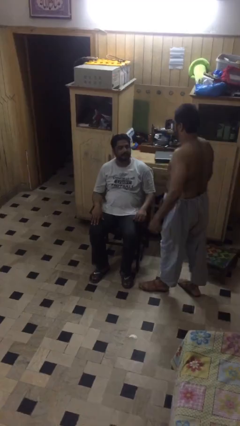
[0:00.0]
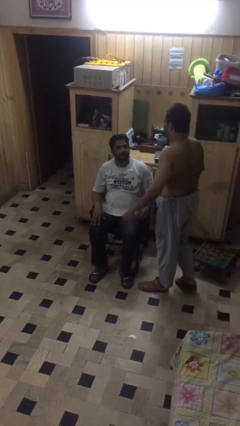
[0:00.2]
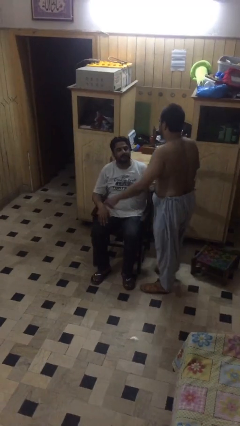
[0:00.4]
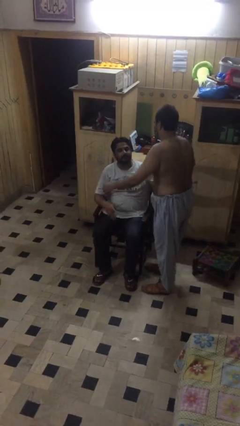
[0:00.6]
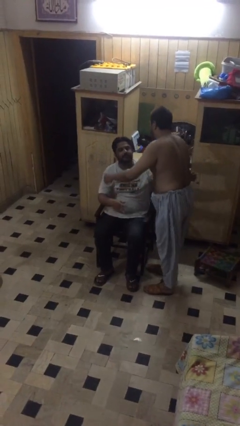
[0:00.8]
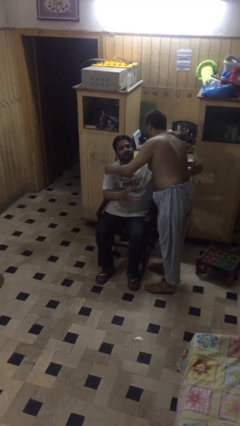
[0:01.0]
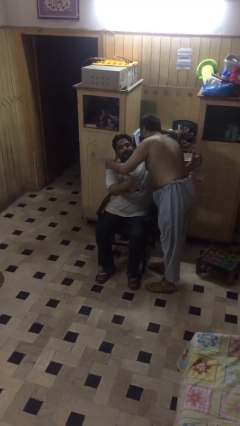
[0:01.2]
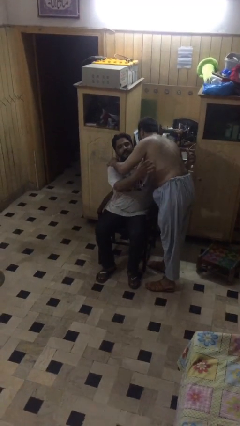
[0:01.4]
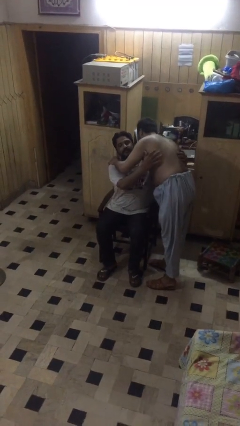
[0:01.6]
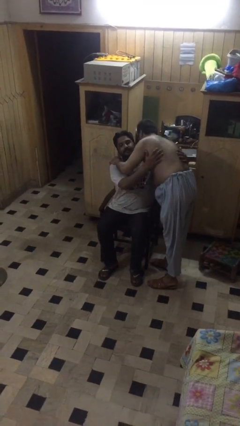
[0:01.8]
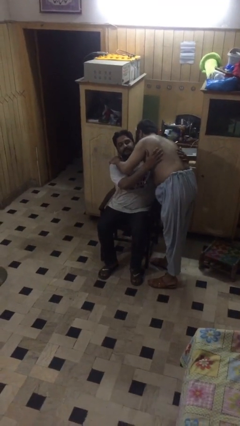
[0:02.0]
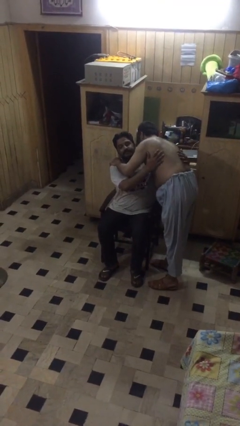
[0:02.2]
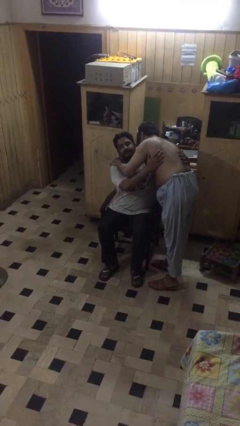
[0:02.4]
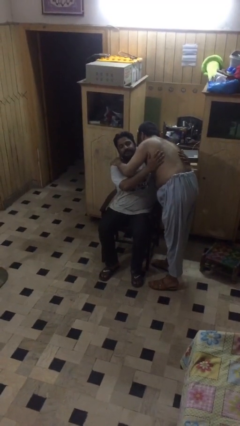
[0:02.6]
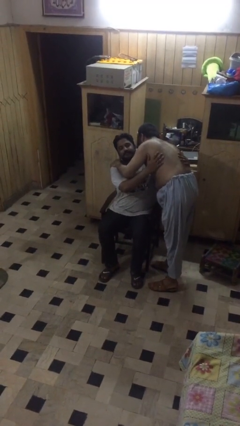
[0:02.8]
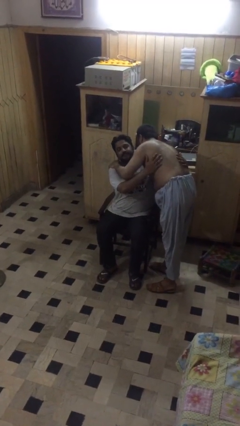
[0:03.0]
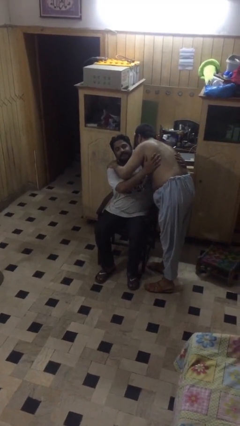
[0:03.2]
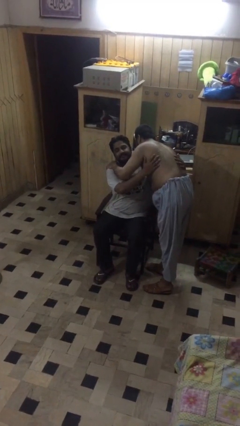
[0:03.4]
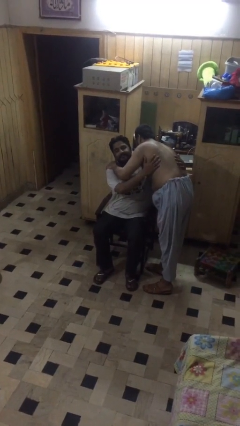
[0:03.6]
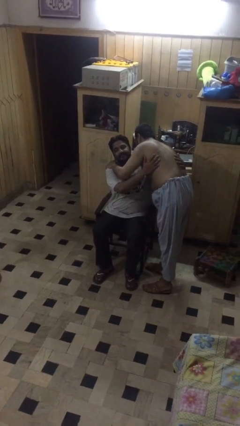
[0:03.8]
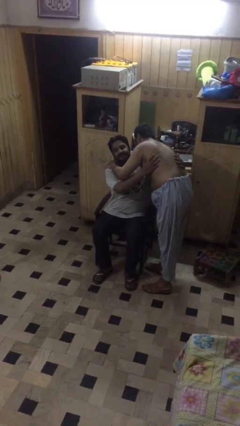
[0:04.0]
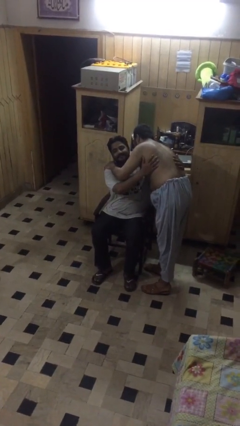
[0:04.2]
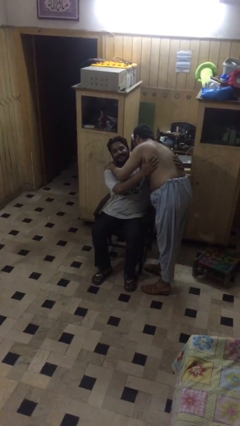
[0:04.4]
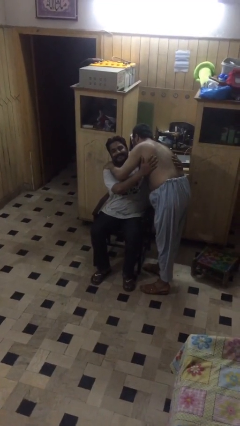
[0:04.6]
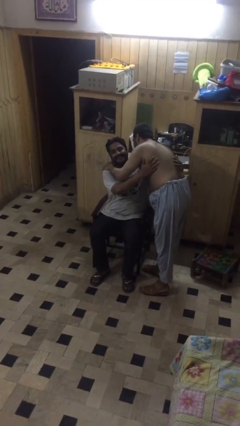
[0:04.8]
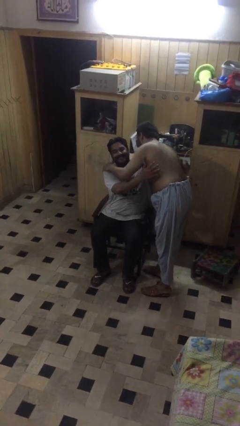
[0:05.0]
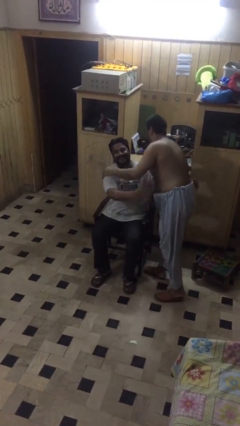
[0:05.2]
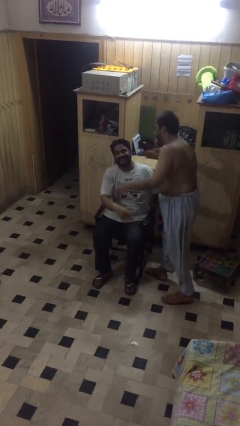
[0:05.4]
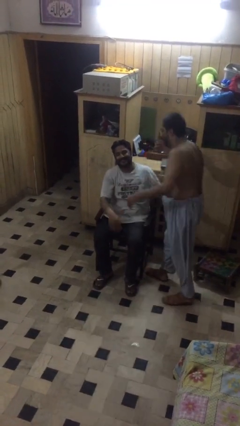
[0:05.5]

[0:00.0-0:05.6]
person embraces person

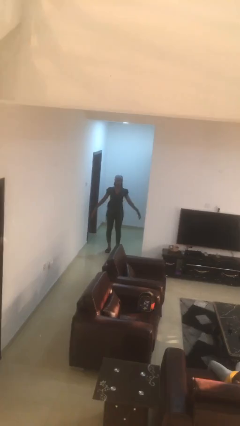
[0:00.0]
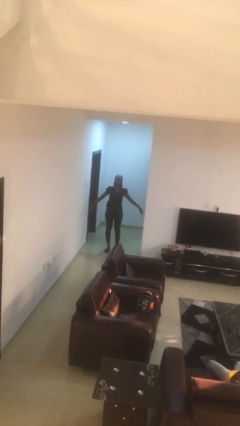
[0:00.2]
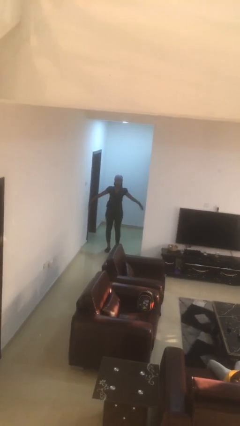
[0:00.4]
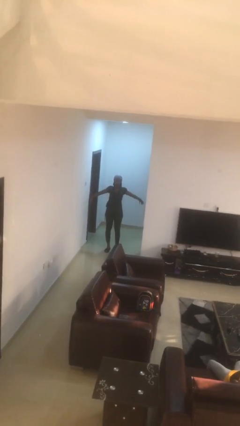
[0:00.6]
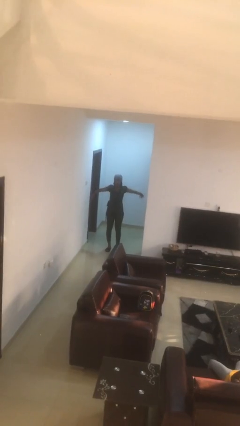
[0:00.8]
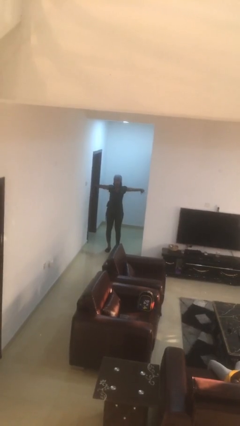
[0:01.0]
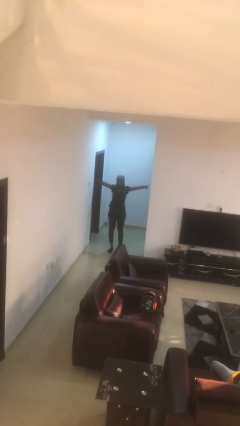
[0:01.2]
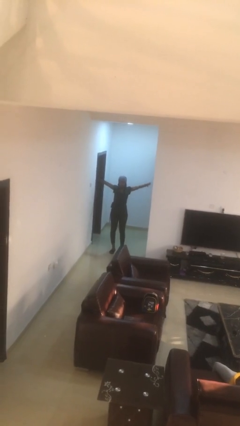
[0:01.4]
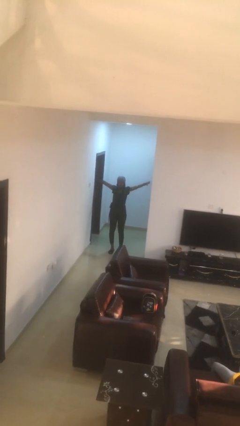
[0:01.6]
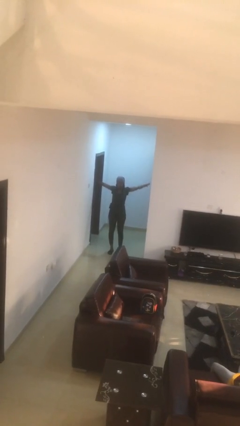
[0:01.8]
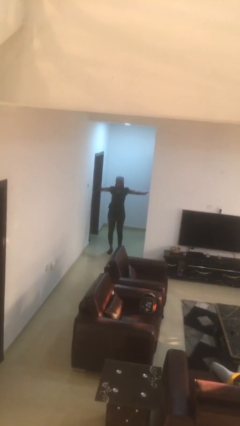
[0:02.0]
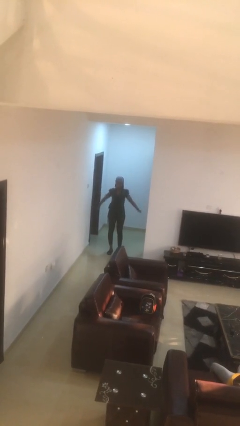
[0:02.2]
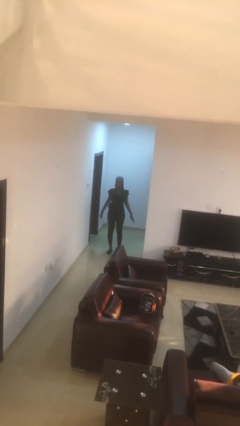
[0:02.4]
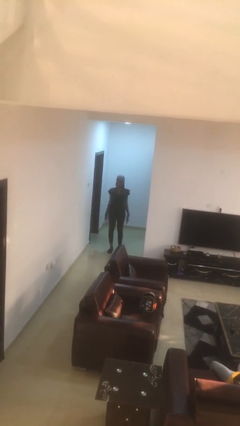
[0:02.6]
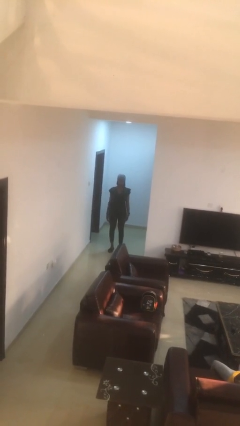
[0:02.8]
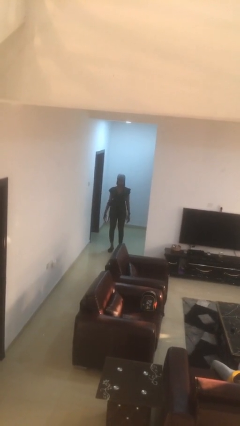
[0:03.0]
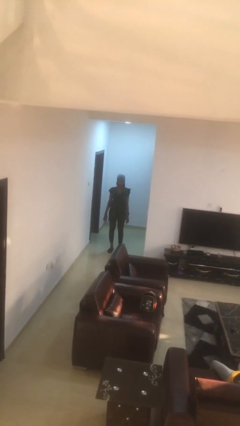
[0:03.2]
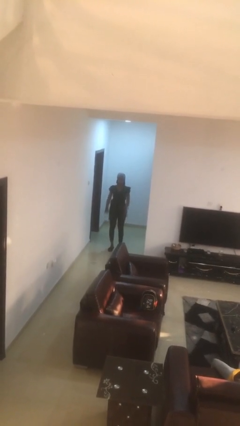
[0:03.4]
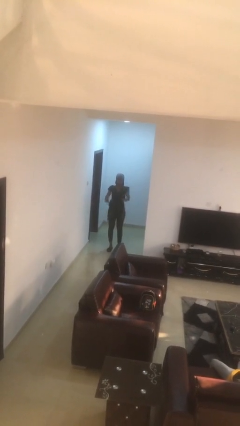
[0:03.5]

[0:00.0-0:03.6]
person stretches arms to side

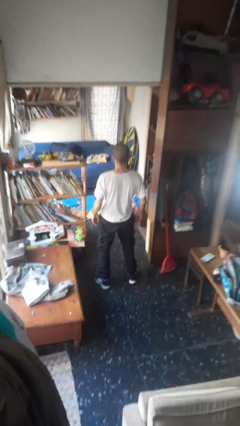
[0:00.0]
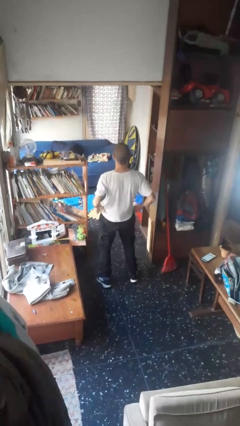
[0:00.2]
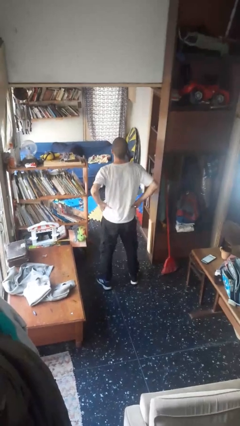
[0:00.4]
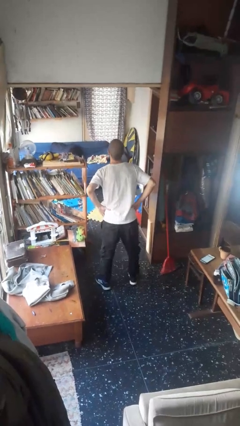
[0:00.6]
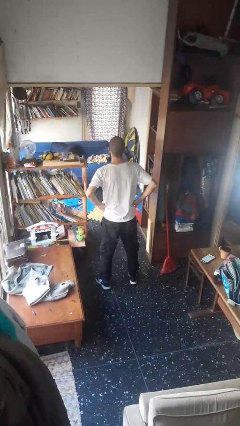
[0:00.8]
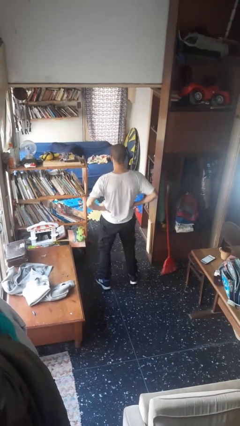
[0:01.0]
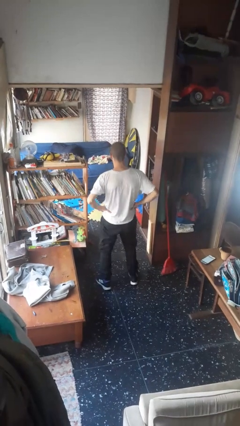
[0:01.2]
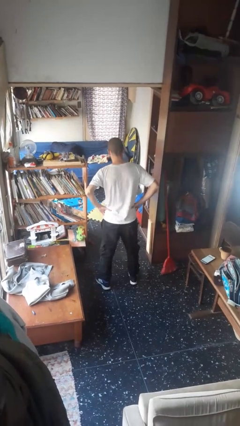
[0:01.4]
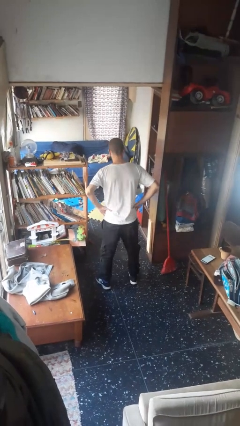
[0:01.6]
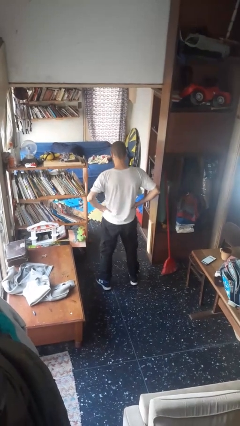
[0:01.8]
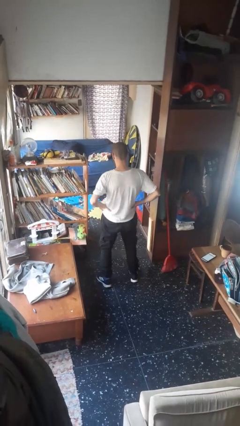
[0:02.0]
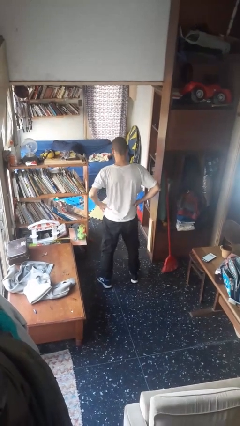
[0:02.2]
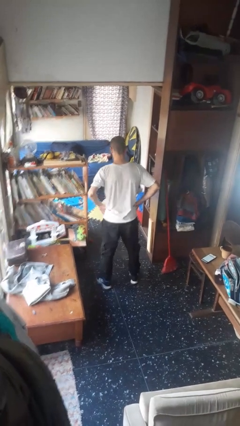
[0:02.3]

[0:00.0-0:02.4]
person wiggles hips

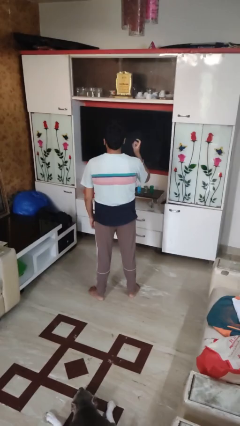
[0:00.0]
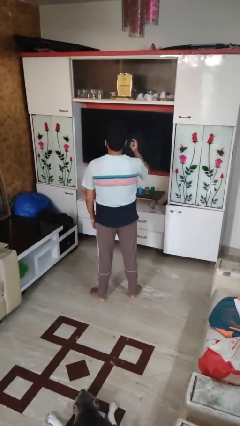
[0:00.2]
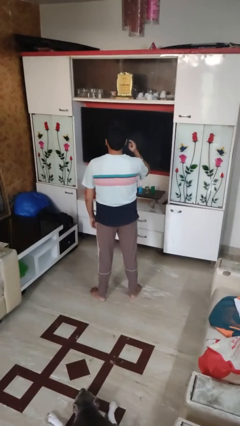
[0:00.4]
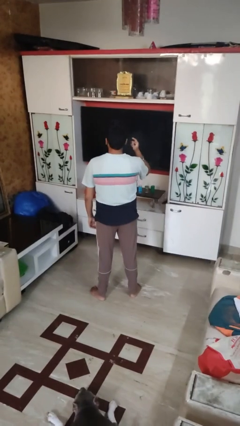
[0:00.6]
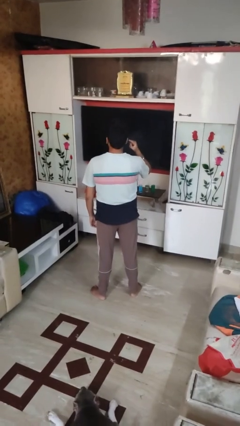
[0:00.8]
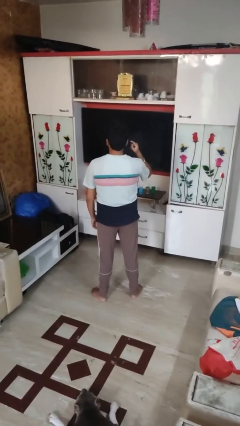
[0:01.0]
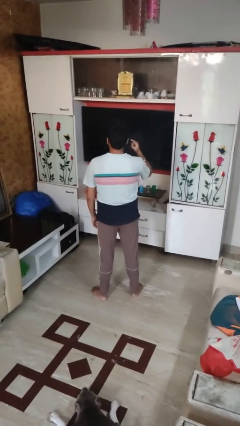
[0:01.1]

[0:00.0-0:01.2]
person gestures listen closely

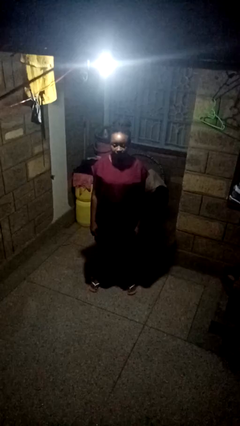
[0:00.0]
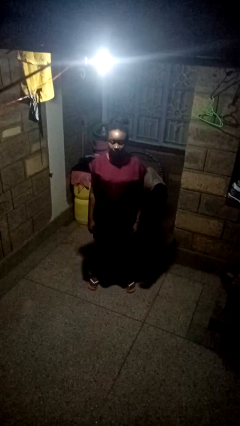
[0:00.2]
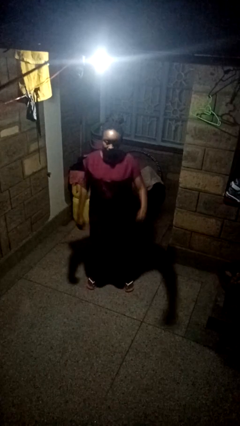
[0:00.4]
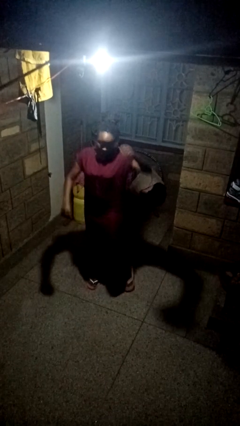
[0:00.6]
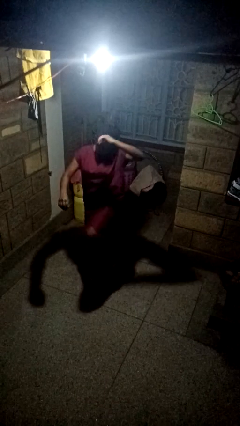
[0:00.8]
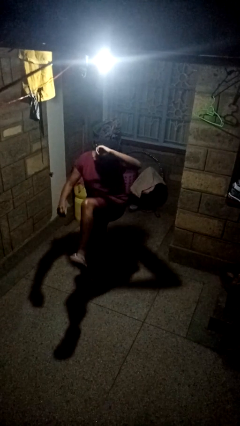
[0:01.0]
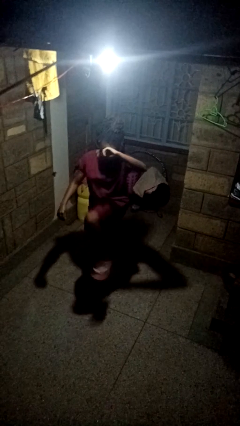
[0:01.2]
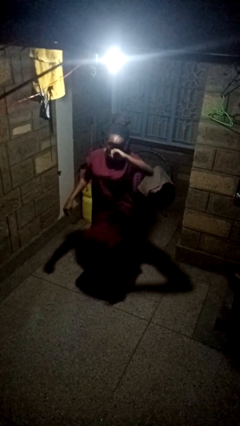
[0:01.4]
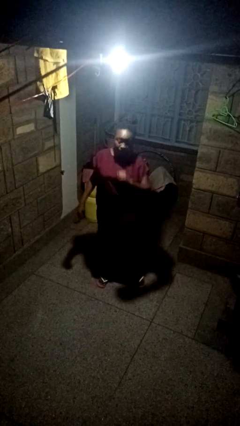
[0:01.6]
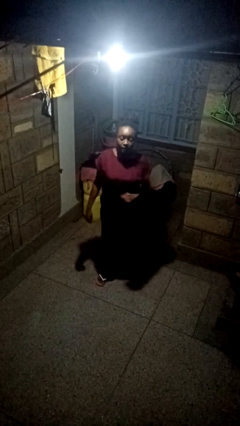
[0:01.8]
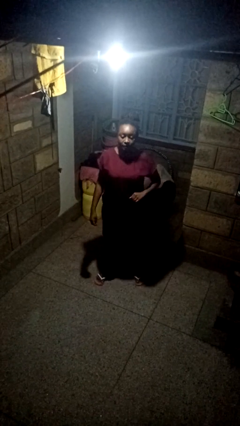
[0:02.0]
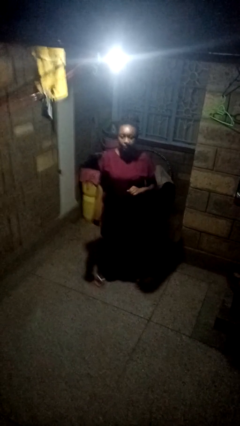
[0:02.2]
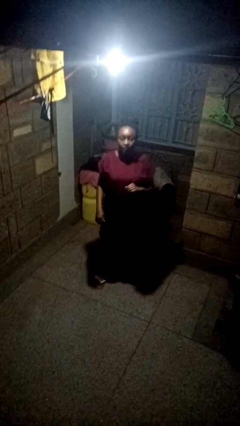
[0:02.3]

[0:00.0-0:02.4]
person karate kicks

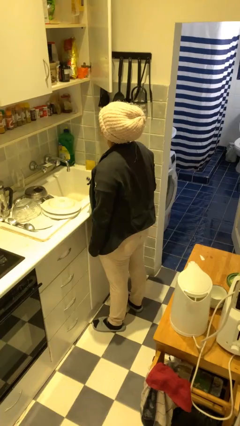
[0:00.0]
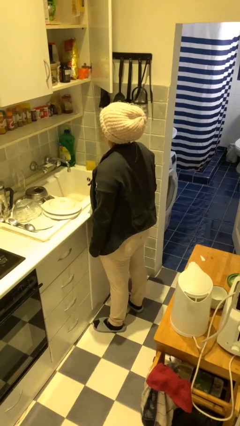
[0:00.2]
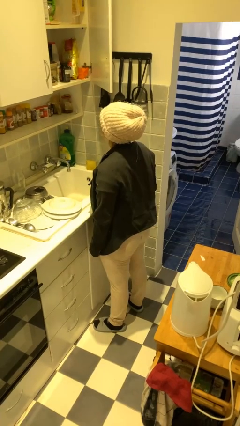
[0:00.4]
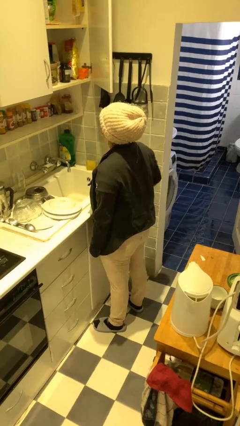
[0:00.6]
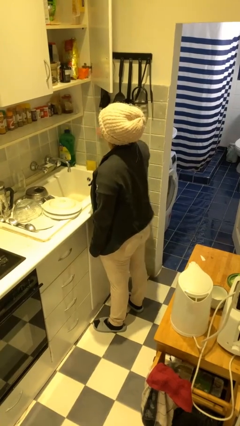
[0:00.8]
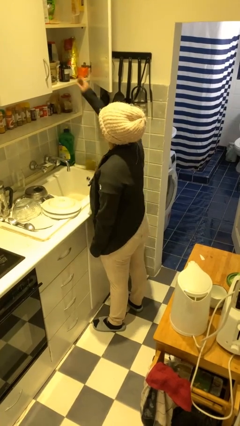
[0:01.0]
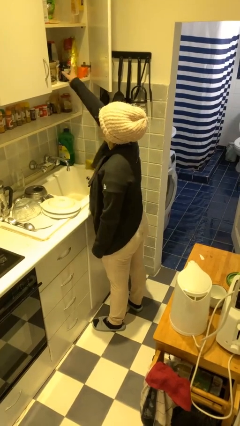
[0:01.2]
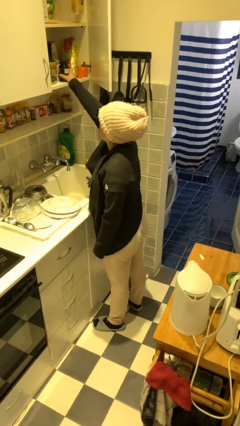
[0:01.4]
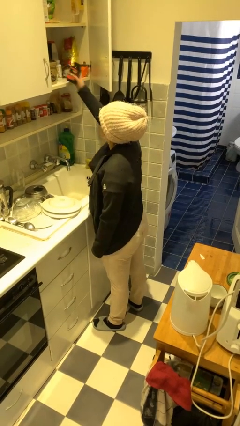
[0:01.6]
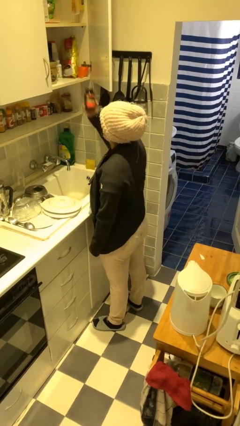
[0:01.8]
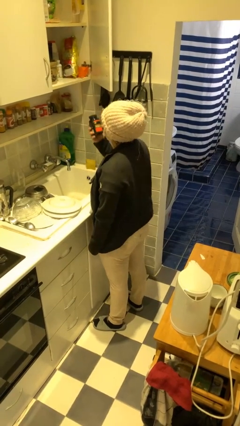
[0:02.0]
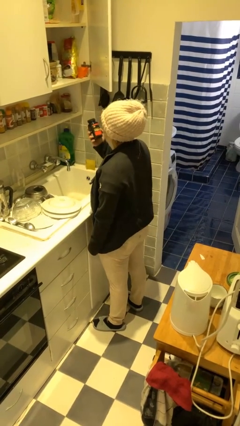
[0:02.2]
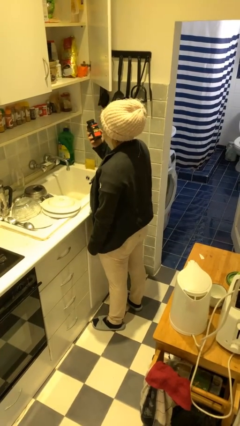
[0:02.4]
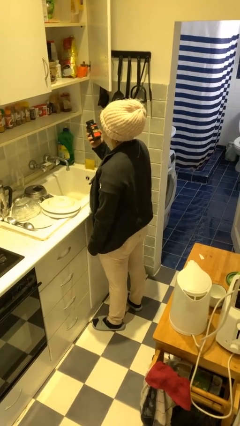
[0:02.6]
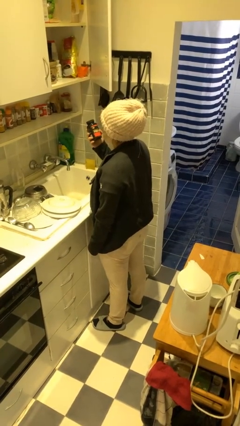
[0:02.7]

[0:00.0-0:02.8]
person picks up object from cabinet
